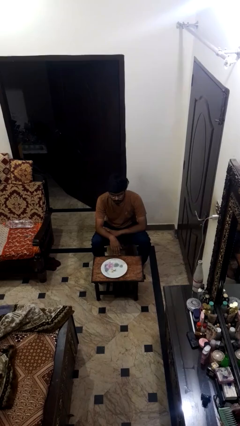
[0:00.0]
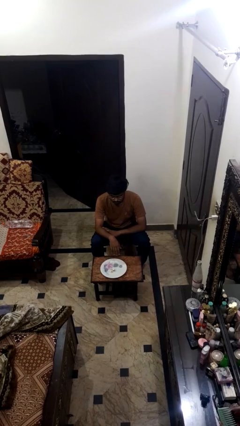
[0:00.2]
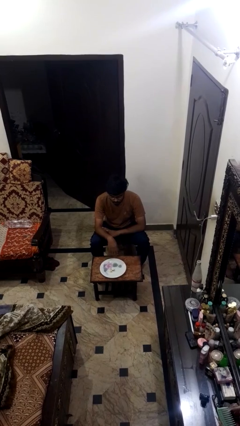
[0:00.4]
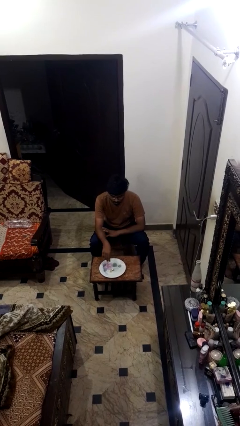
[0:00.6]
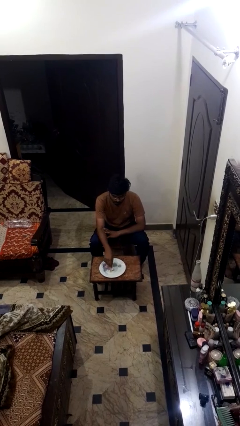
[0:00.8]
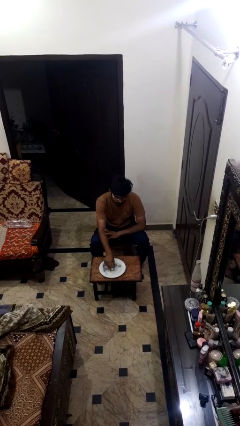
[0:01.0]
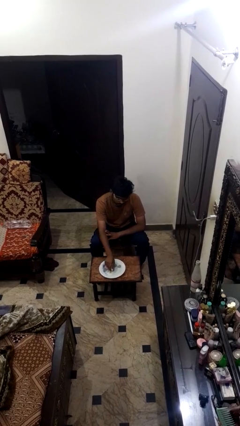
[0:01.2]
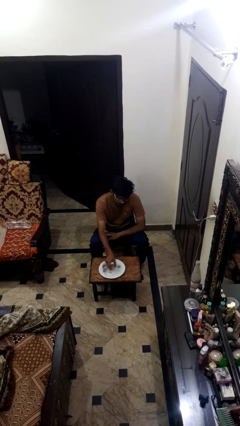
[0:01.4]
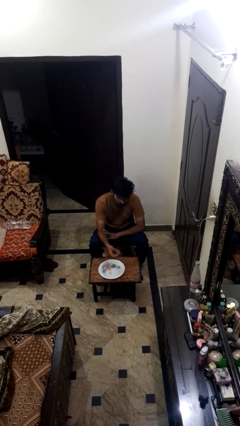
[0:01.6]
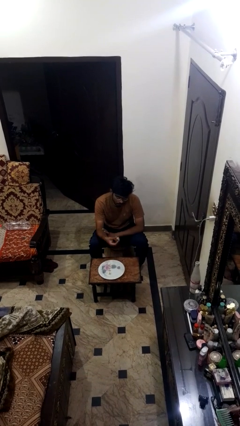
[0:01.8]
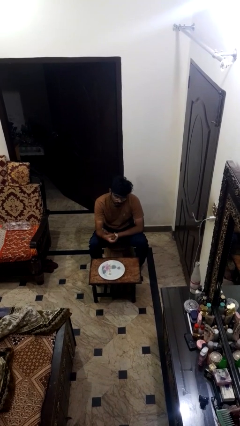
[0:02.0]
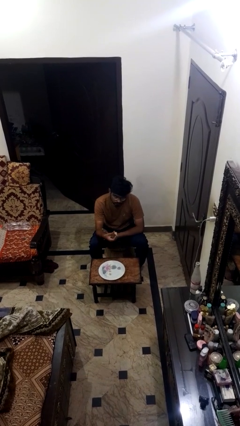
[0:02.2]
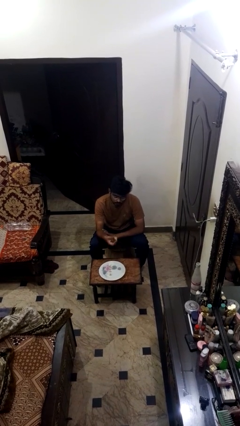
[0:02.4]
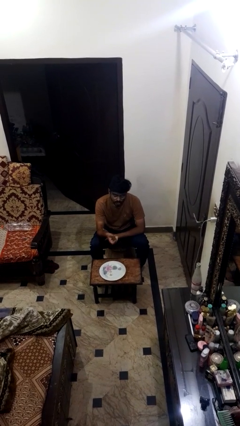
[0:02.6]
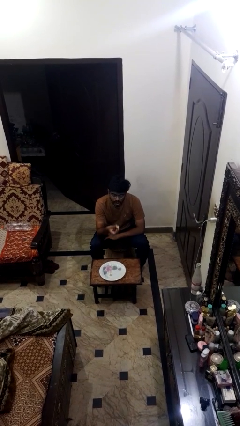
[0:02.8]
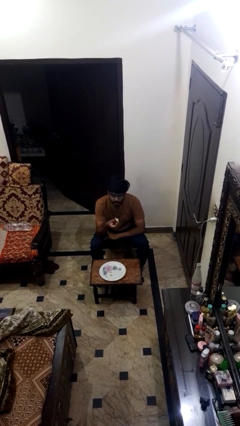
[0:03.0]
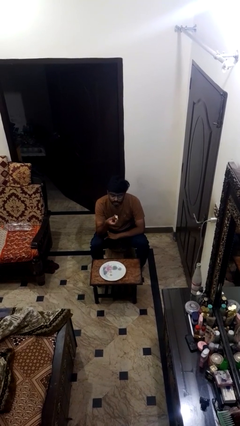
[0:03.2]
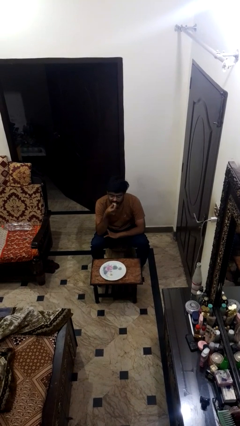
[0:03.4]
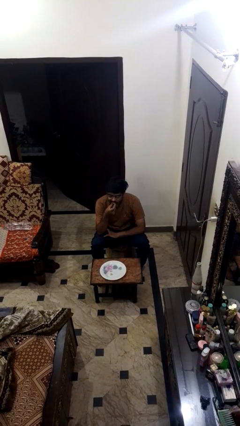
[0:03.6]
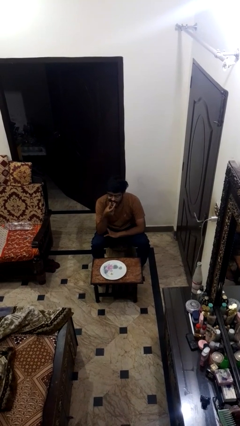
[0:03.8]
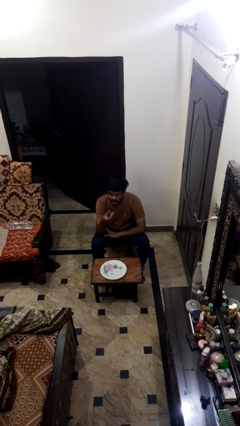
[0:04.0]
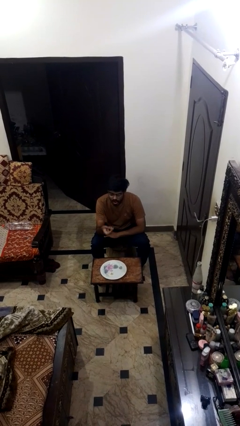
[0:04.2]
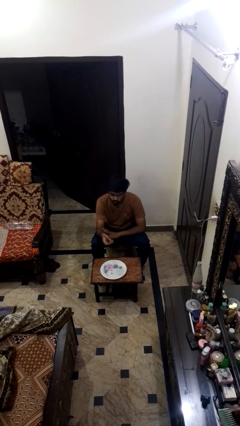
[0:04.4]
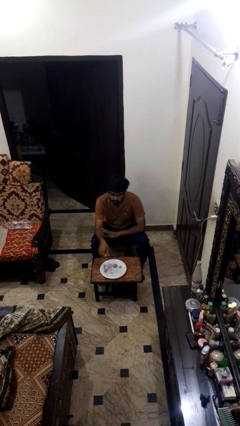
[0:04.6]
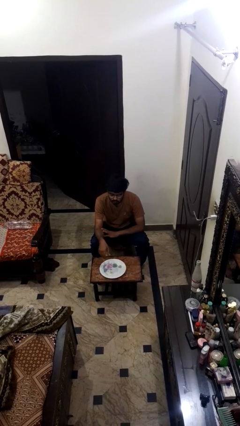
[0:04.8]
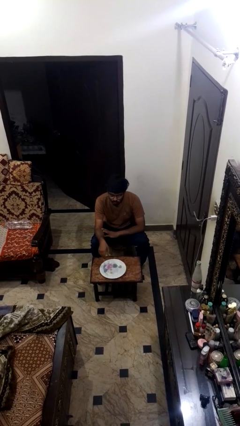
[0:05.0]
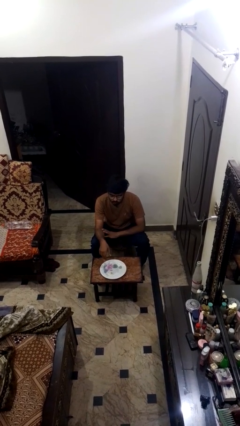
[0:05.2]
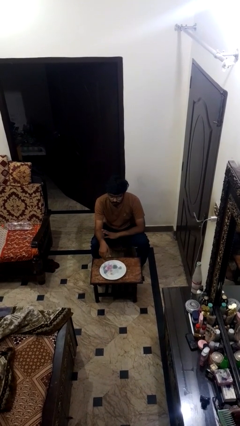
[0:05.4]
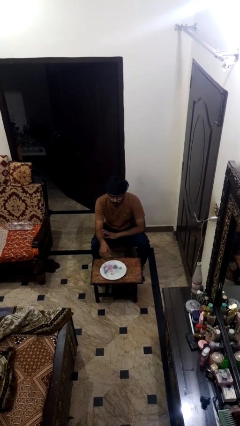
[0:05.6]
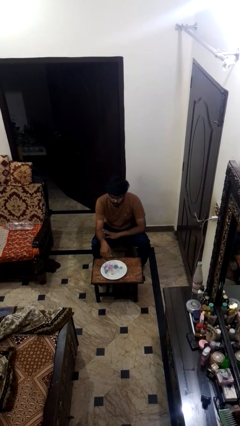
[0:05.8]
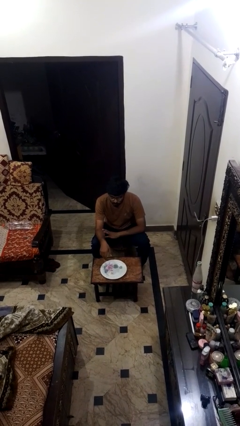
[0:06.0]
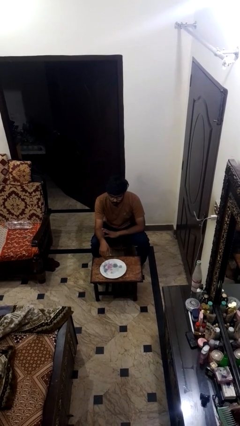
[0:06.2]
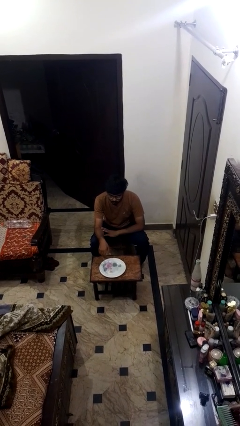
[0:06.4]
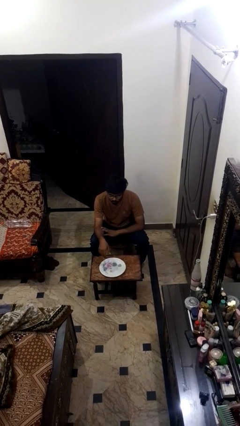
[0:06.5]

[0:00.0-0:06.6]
person eats with hands

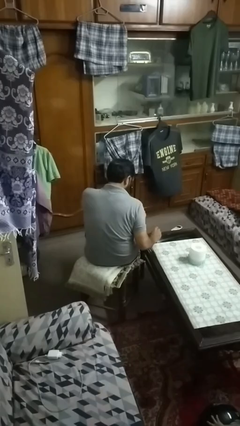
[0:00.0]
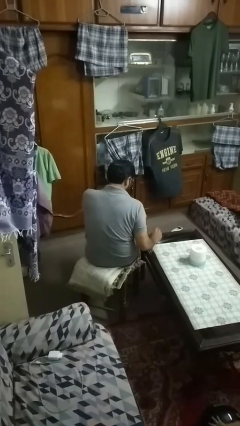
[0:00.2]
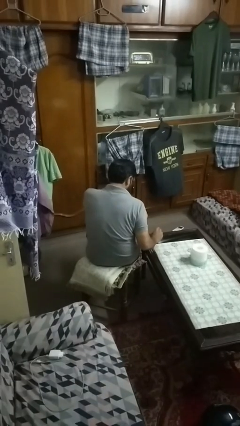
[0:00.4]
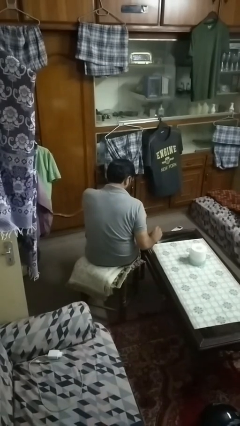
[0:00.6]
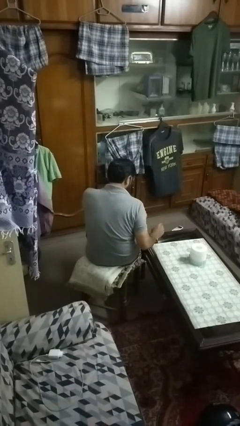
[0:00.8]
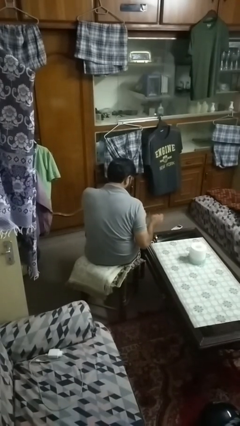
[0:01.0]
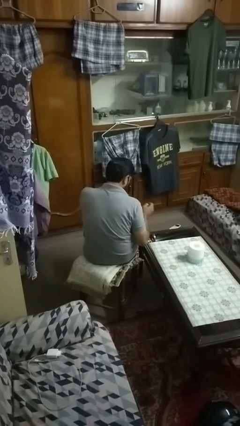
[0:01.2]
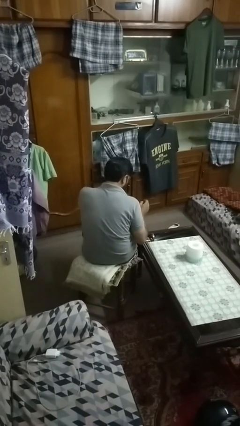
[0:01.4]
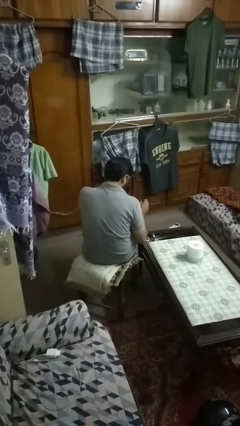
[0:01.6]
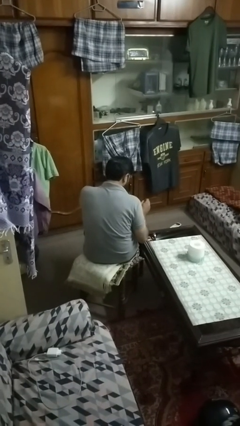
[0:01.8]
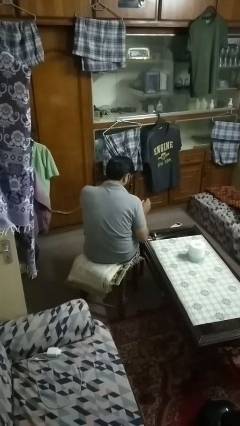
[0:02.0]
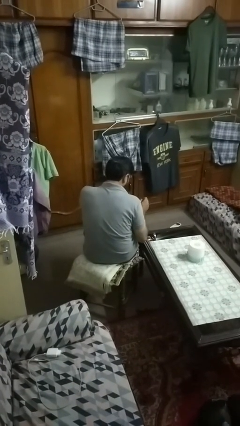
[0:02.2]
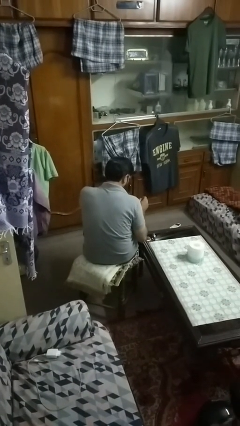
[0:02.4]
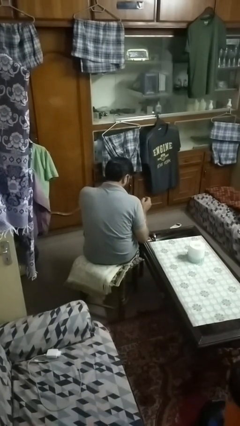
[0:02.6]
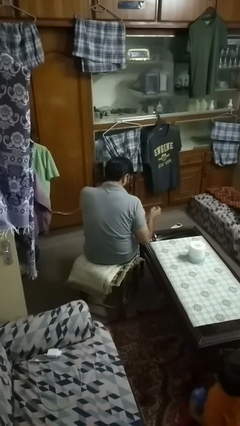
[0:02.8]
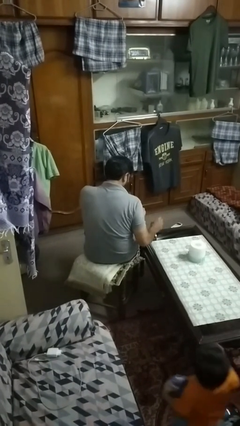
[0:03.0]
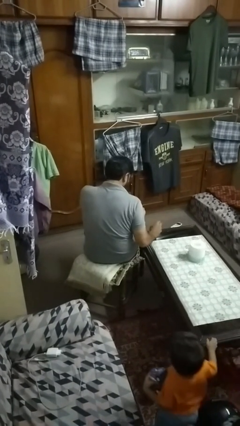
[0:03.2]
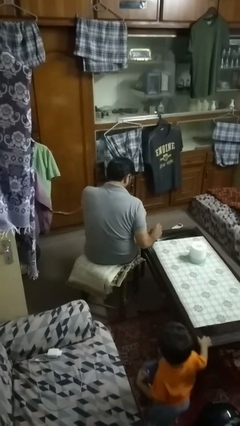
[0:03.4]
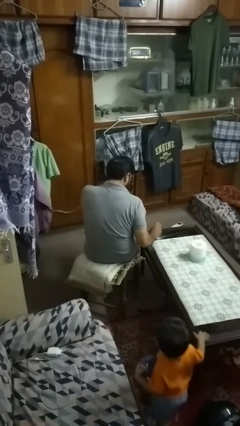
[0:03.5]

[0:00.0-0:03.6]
person paints fingernails

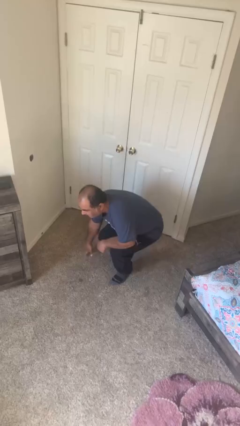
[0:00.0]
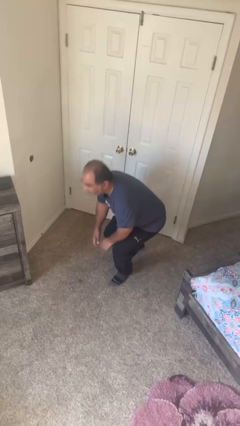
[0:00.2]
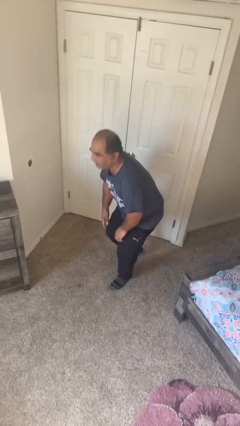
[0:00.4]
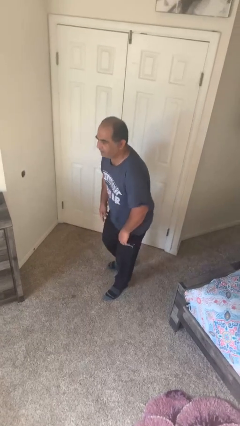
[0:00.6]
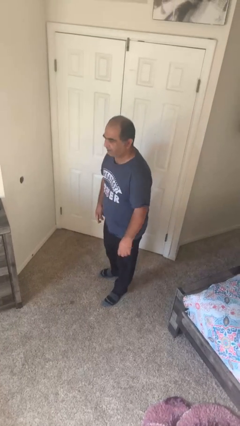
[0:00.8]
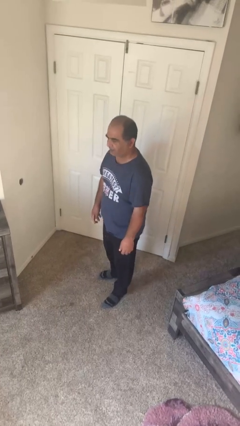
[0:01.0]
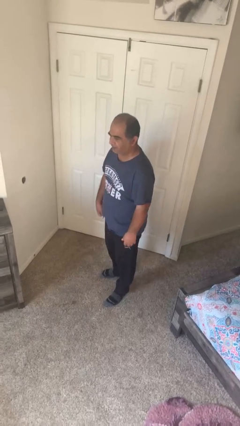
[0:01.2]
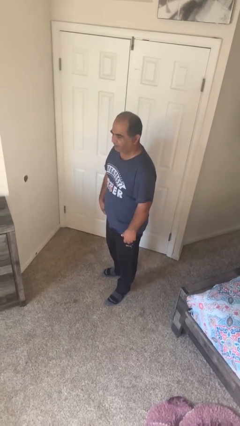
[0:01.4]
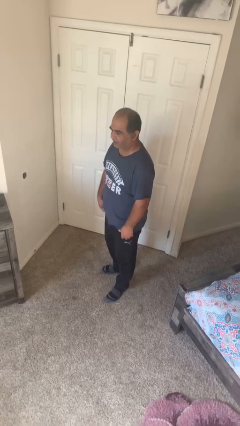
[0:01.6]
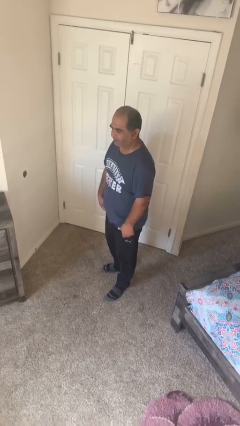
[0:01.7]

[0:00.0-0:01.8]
person stands up

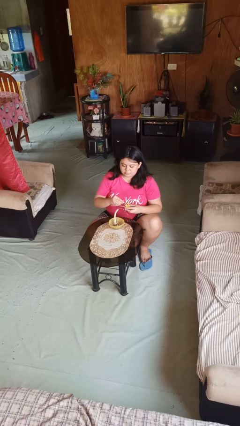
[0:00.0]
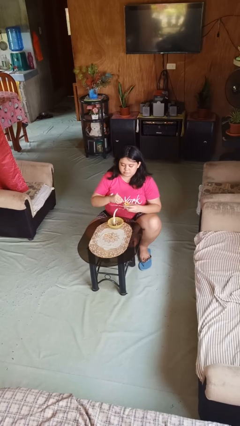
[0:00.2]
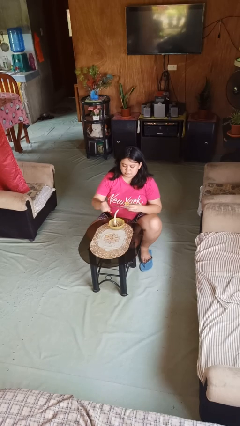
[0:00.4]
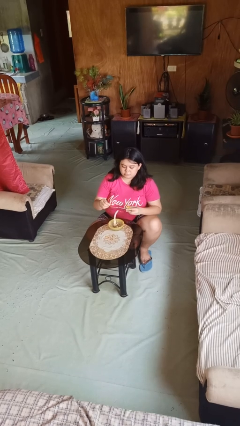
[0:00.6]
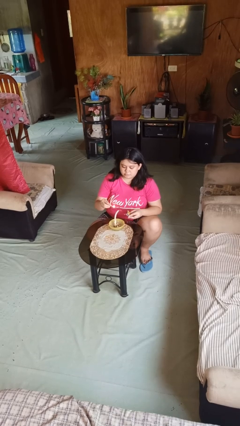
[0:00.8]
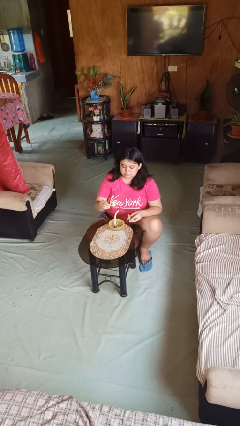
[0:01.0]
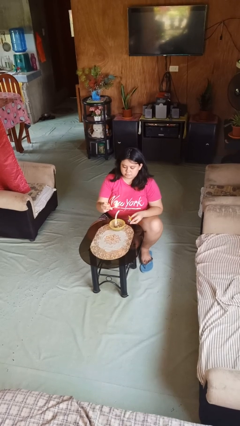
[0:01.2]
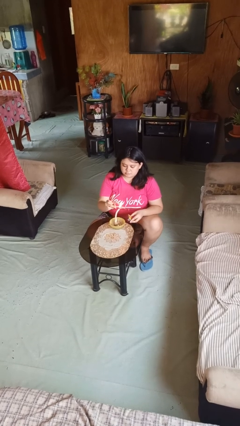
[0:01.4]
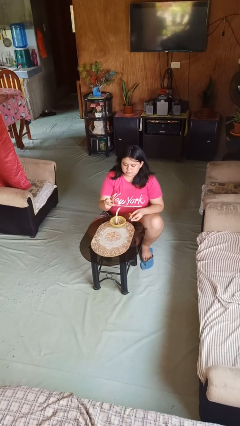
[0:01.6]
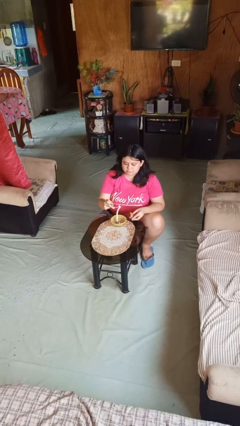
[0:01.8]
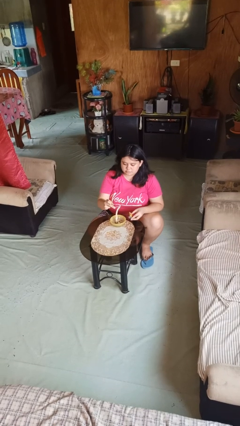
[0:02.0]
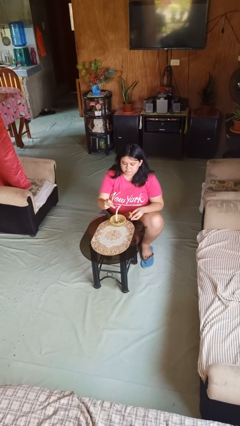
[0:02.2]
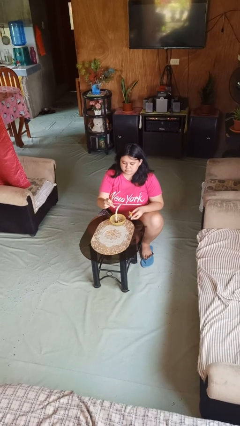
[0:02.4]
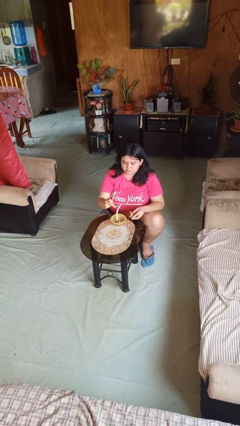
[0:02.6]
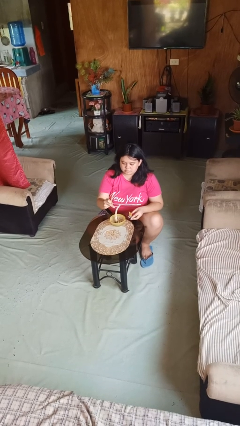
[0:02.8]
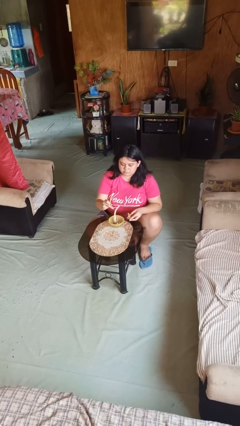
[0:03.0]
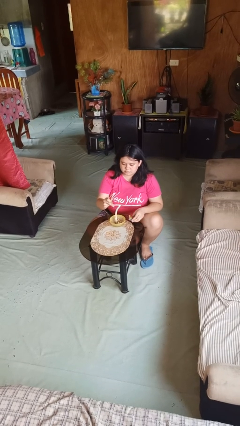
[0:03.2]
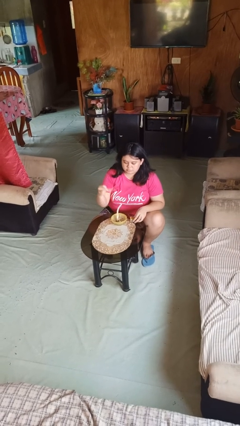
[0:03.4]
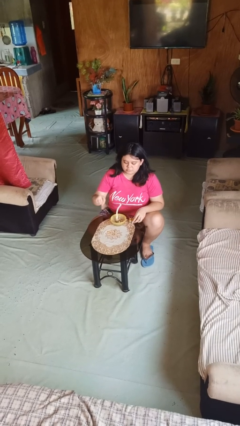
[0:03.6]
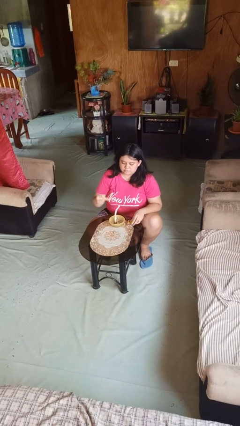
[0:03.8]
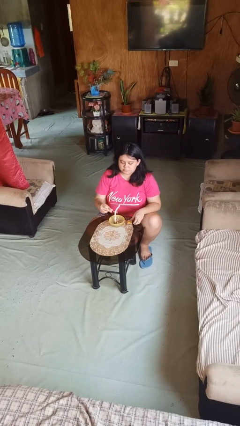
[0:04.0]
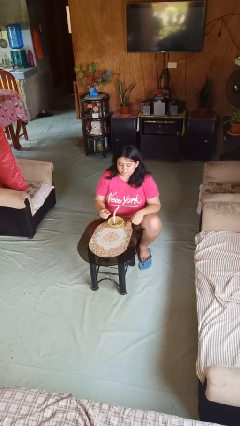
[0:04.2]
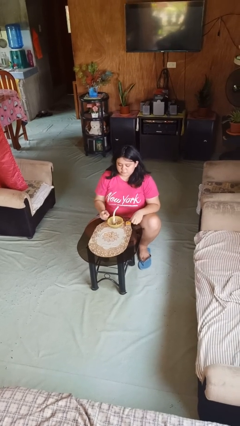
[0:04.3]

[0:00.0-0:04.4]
person lights candle

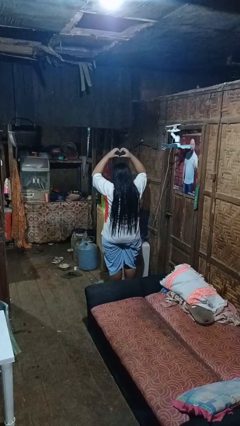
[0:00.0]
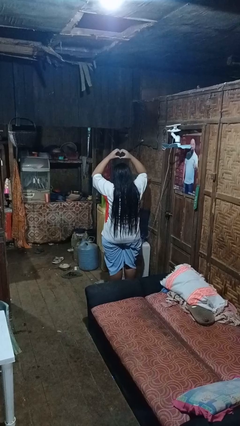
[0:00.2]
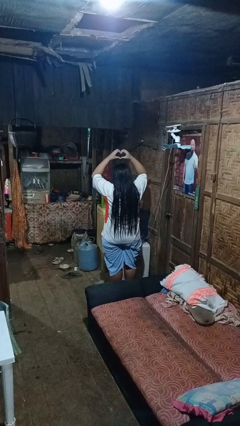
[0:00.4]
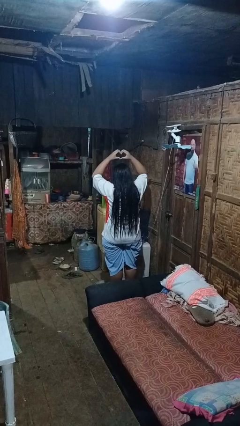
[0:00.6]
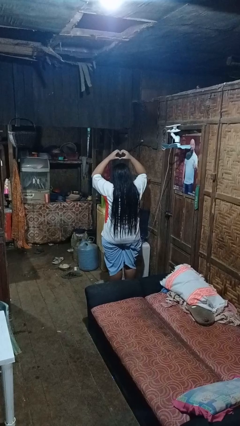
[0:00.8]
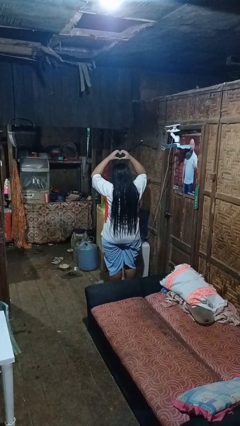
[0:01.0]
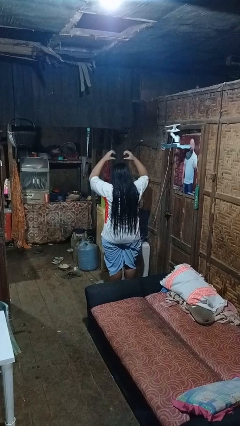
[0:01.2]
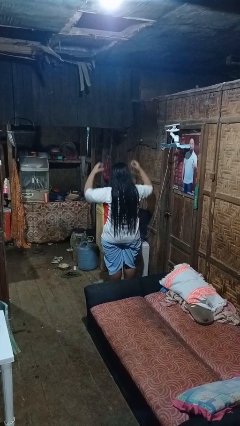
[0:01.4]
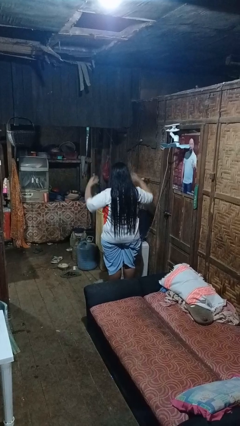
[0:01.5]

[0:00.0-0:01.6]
person gestures heart
